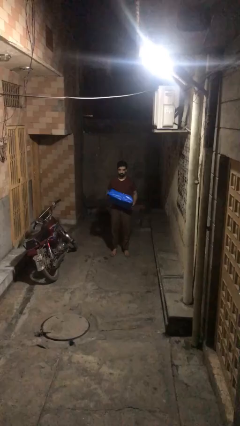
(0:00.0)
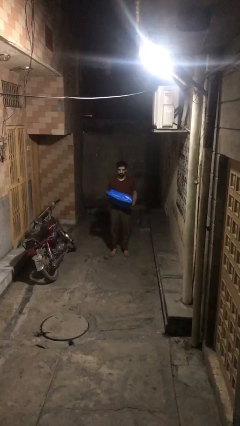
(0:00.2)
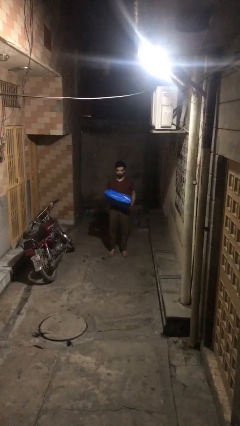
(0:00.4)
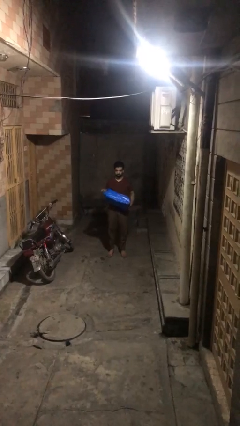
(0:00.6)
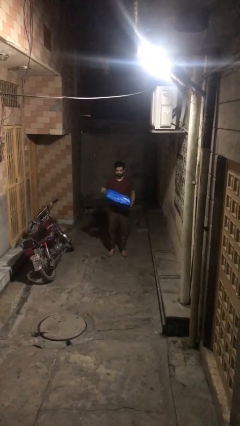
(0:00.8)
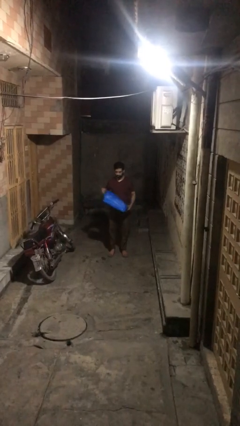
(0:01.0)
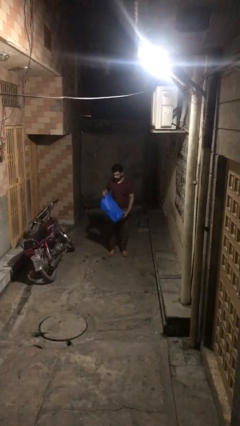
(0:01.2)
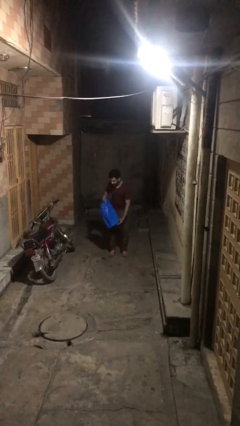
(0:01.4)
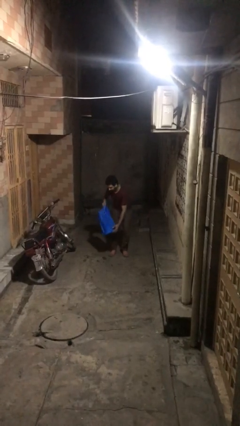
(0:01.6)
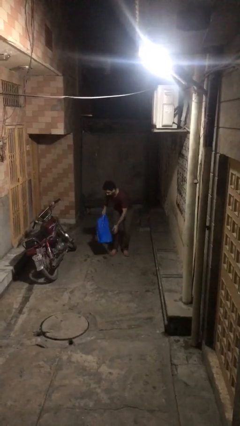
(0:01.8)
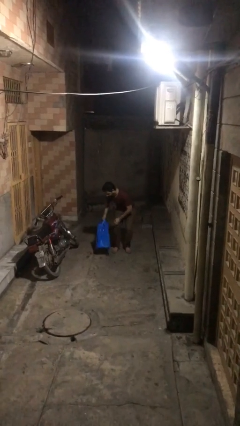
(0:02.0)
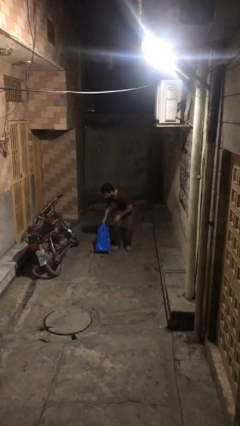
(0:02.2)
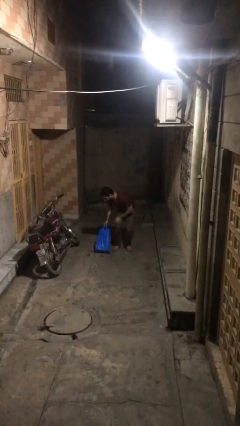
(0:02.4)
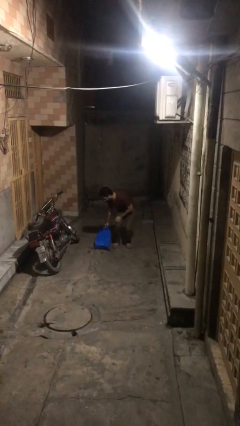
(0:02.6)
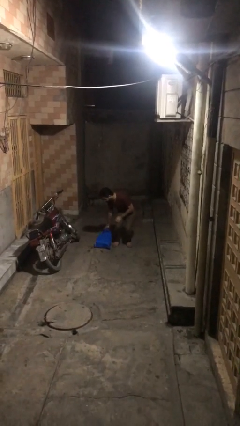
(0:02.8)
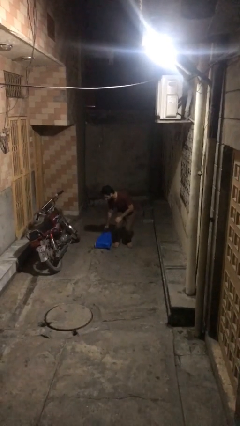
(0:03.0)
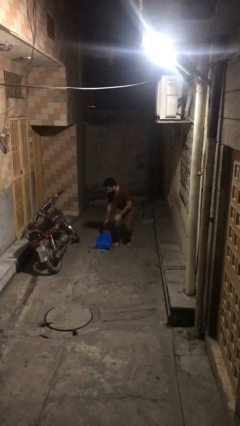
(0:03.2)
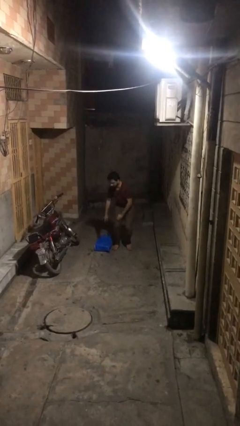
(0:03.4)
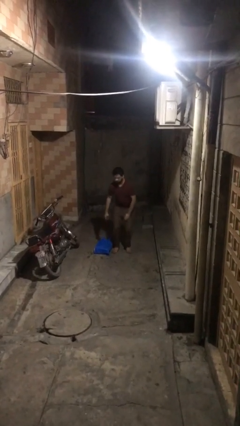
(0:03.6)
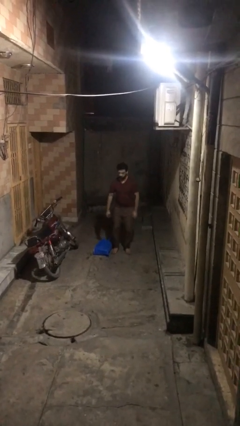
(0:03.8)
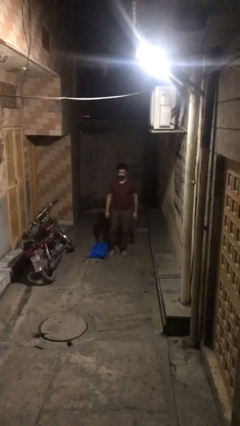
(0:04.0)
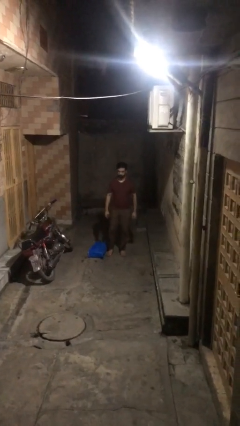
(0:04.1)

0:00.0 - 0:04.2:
person puts down object on floor

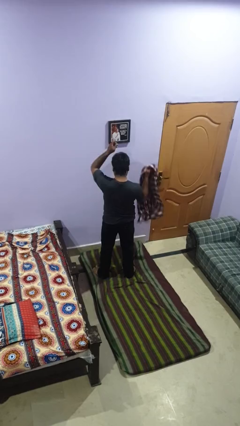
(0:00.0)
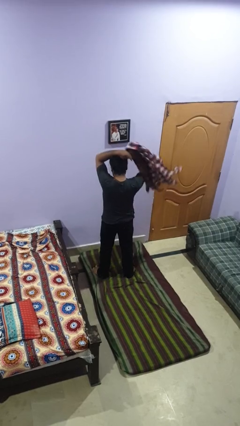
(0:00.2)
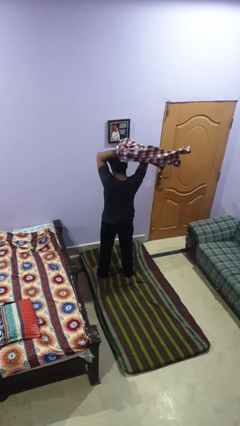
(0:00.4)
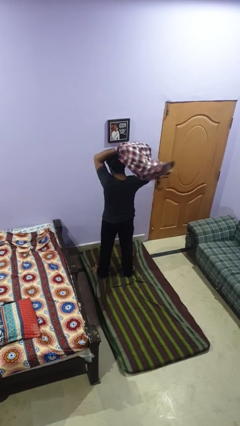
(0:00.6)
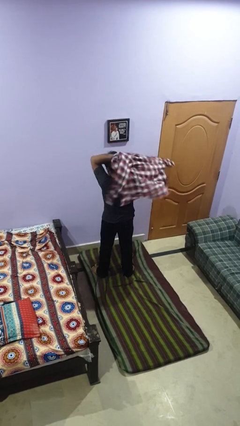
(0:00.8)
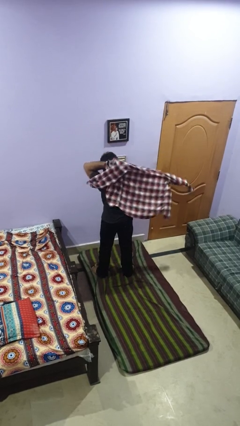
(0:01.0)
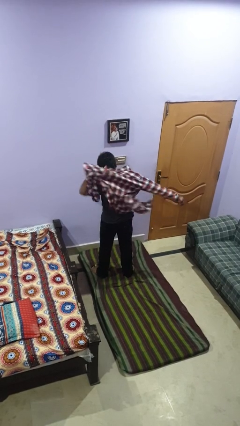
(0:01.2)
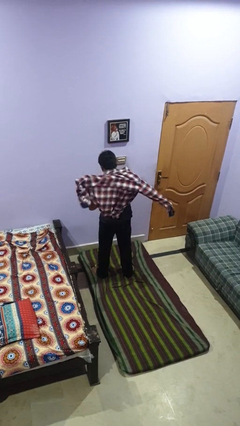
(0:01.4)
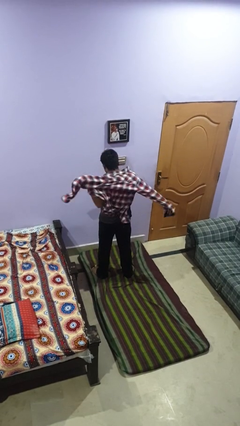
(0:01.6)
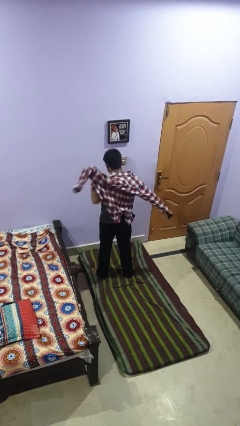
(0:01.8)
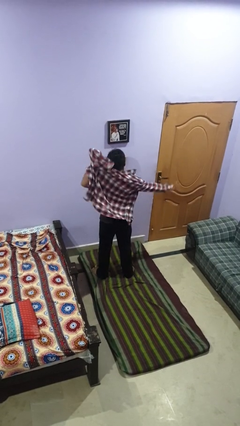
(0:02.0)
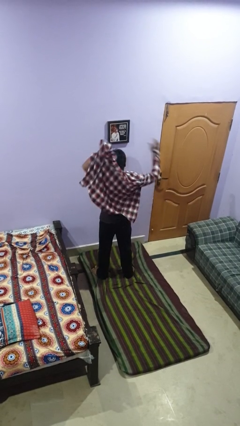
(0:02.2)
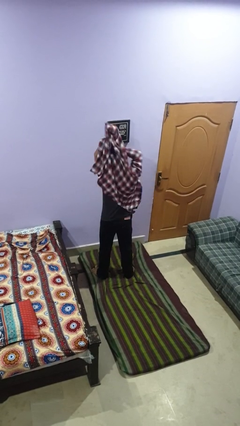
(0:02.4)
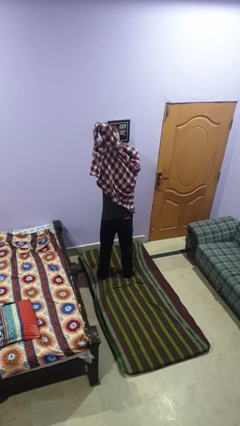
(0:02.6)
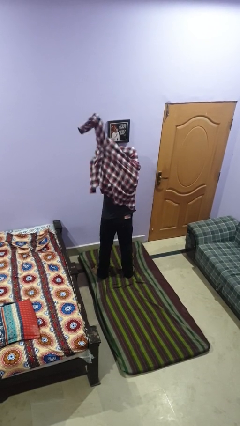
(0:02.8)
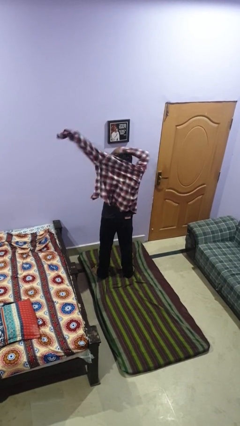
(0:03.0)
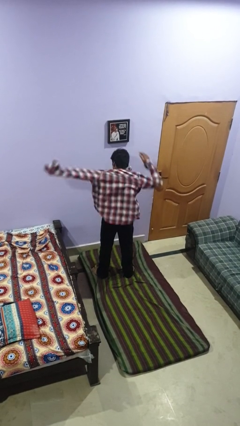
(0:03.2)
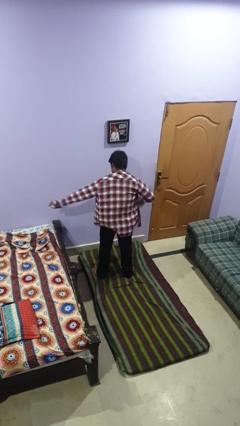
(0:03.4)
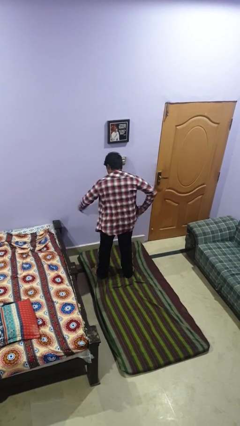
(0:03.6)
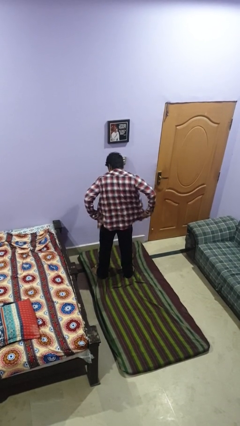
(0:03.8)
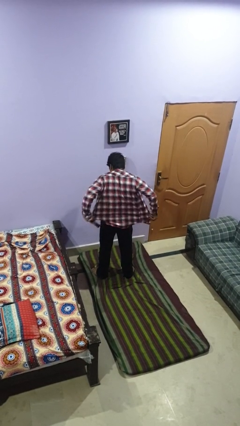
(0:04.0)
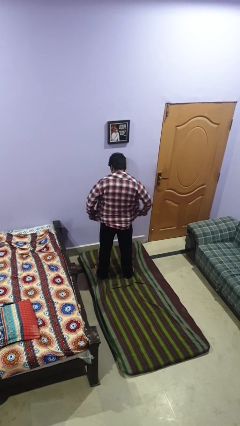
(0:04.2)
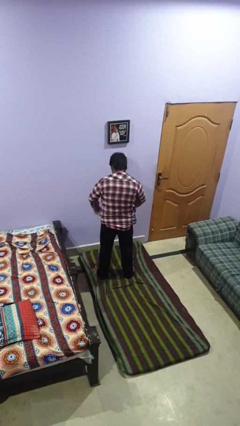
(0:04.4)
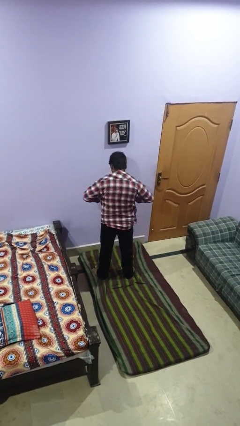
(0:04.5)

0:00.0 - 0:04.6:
person puts on shirt

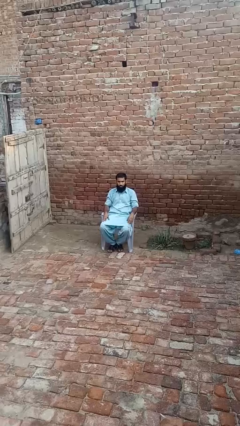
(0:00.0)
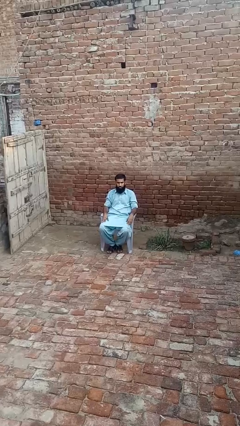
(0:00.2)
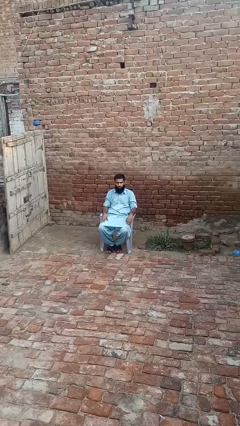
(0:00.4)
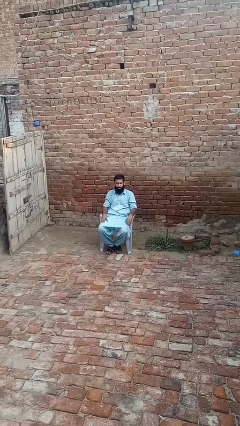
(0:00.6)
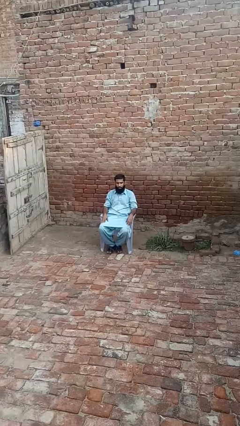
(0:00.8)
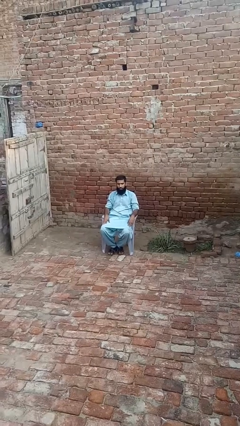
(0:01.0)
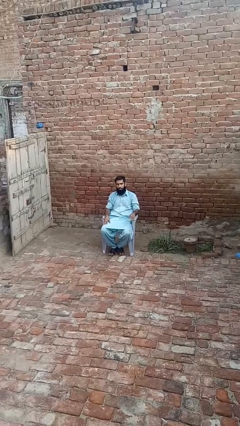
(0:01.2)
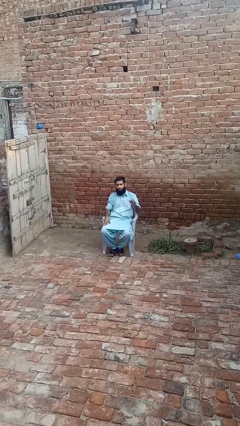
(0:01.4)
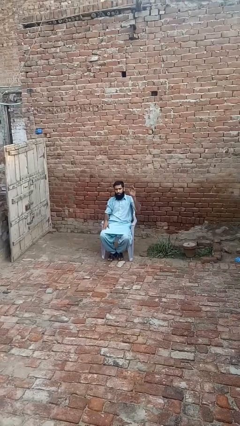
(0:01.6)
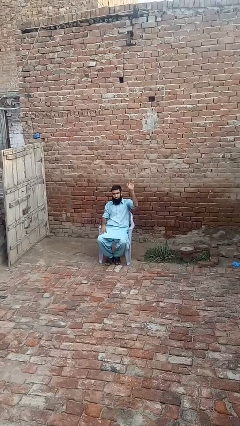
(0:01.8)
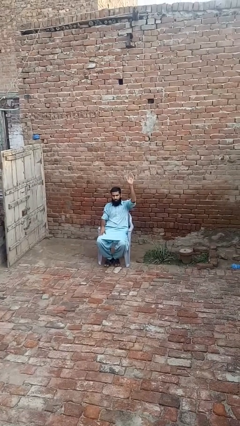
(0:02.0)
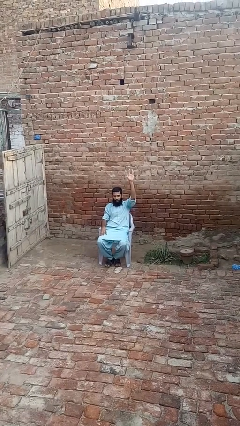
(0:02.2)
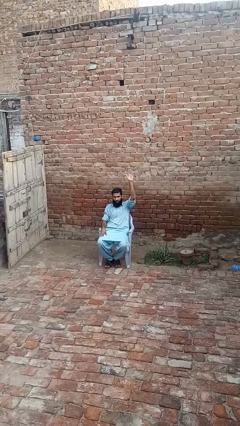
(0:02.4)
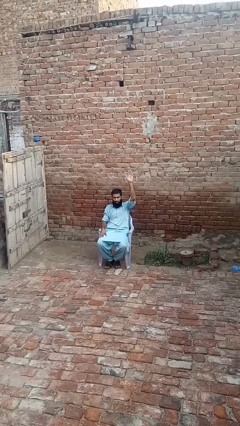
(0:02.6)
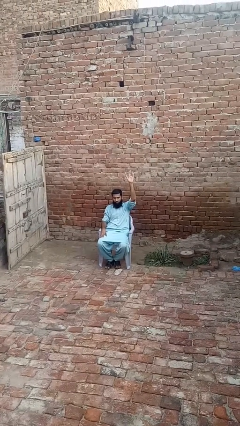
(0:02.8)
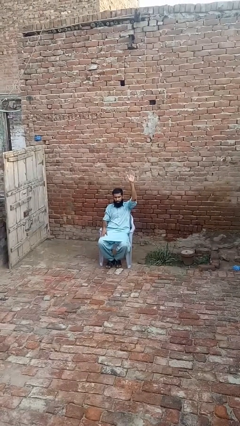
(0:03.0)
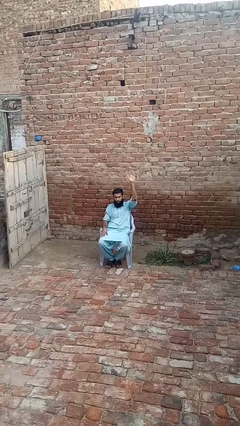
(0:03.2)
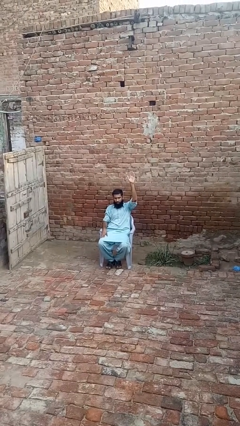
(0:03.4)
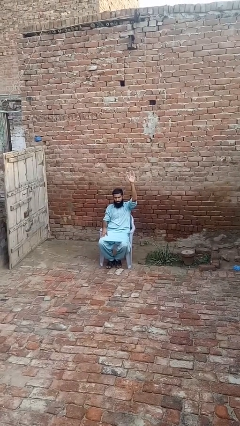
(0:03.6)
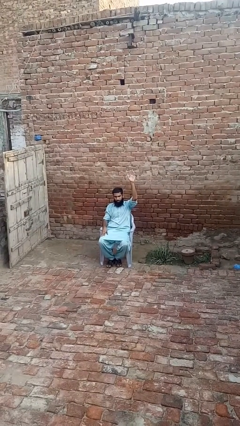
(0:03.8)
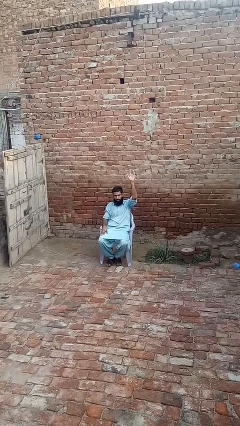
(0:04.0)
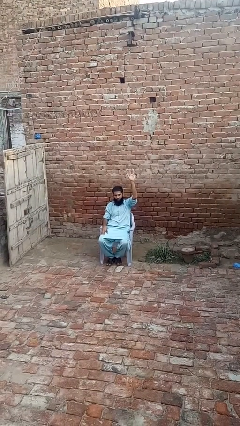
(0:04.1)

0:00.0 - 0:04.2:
person gestures raise hand

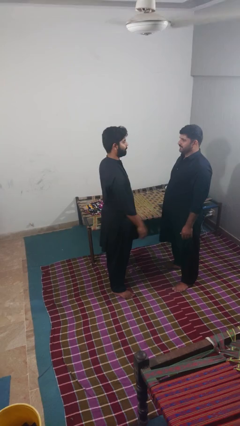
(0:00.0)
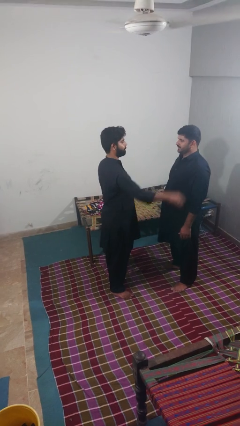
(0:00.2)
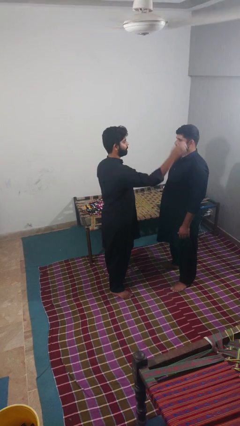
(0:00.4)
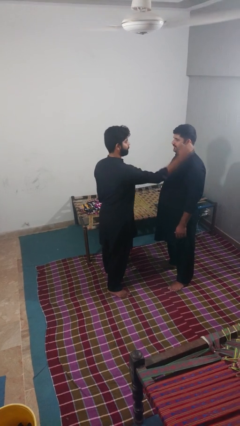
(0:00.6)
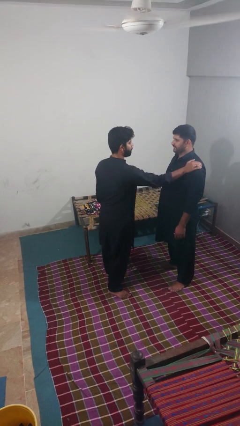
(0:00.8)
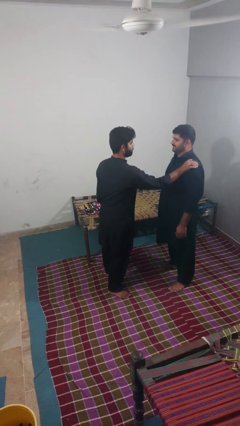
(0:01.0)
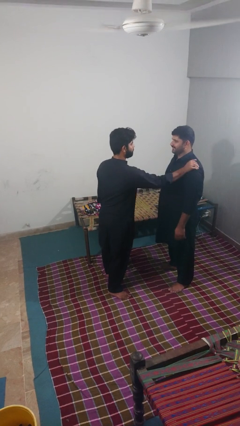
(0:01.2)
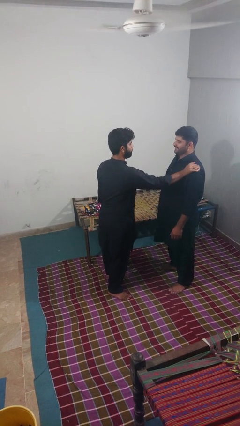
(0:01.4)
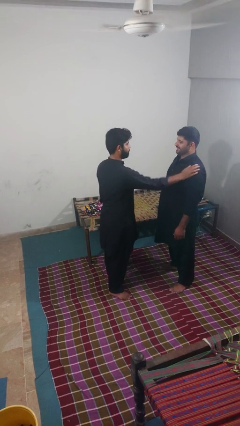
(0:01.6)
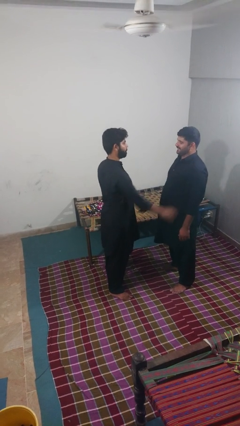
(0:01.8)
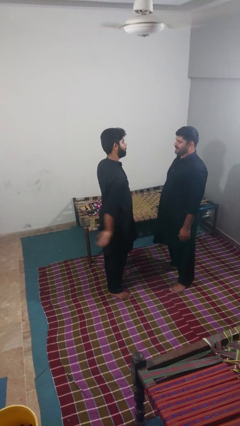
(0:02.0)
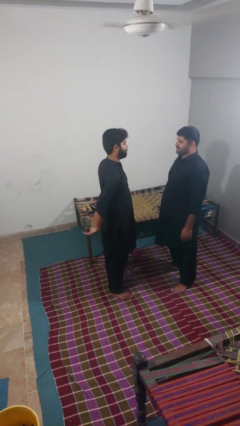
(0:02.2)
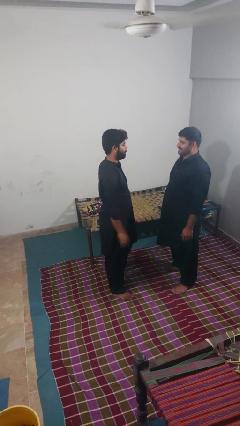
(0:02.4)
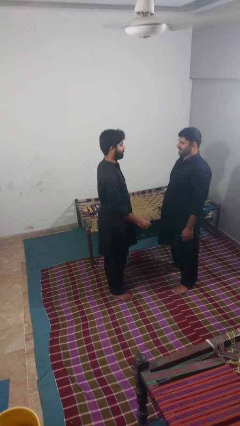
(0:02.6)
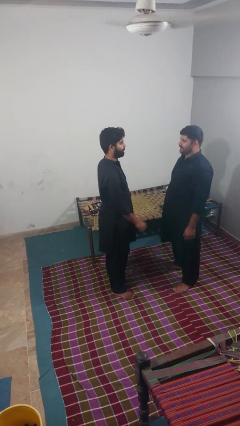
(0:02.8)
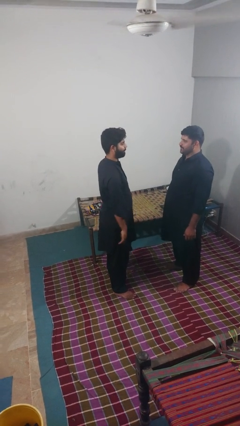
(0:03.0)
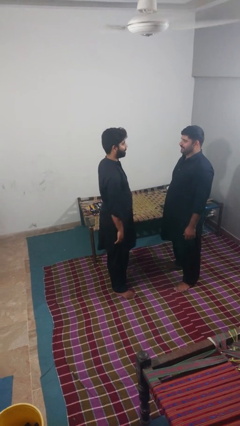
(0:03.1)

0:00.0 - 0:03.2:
person pounds shoulders of person

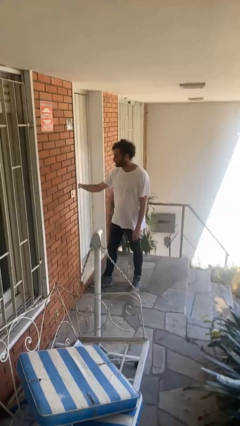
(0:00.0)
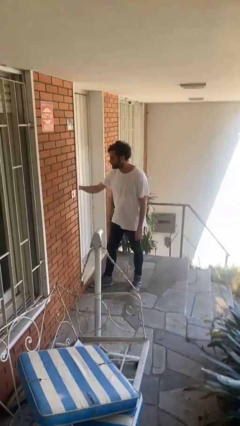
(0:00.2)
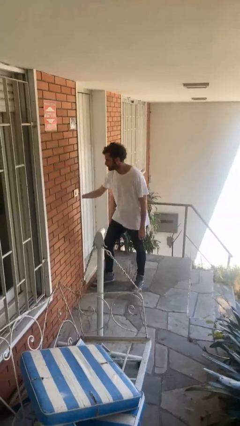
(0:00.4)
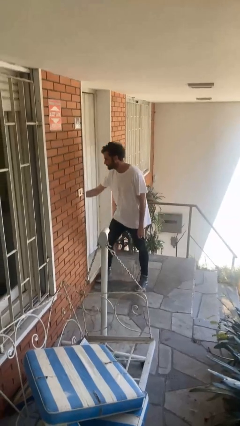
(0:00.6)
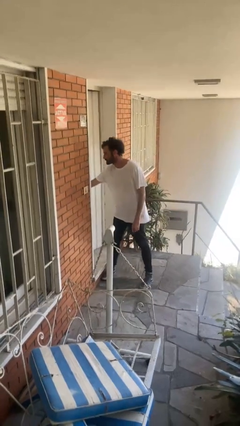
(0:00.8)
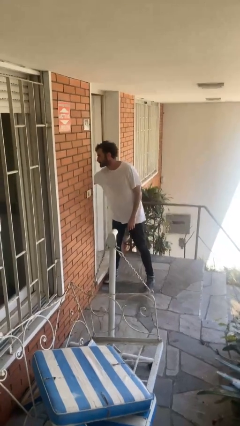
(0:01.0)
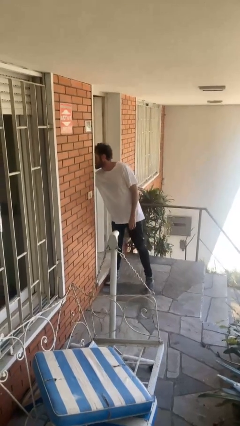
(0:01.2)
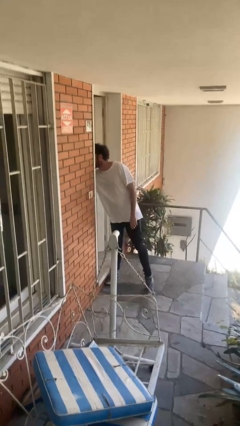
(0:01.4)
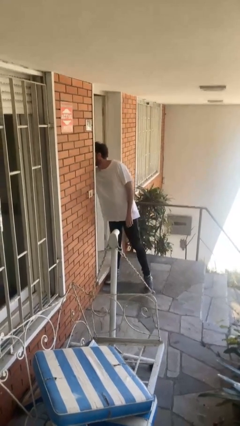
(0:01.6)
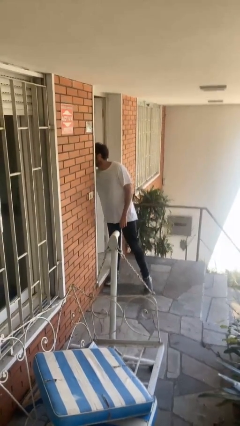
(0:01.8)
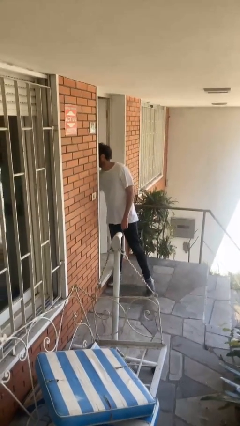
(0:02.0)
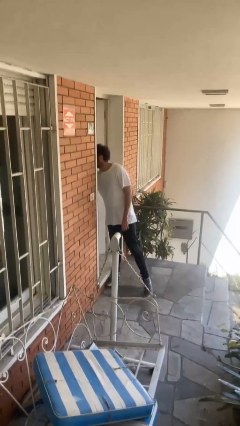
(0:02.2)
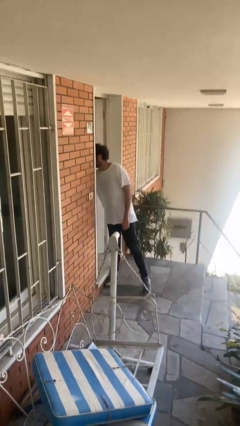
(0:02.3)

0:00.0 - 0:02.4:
person opens facility door
